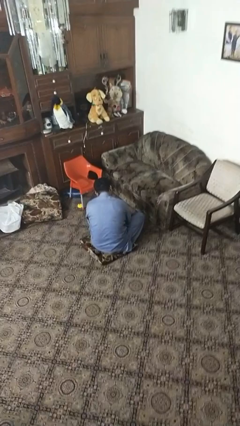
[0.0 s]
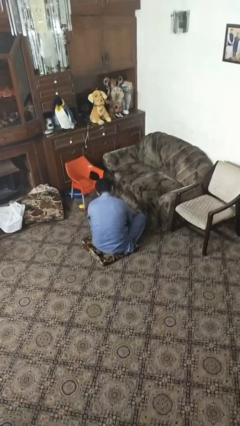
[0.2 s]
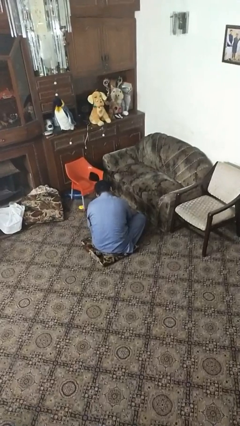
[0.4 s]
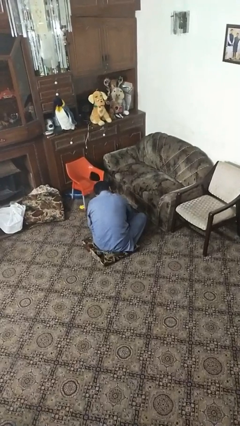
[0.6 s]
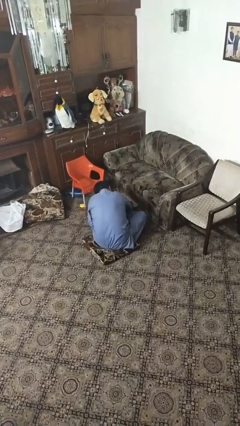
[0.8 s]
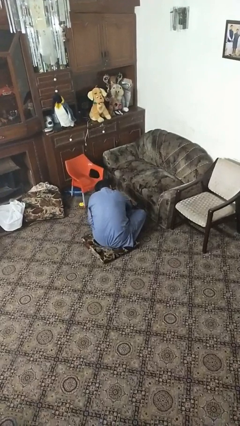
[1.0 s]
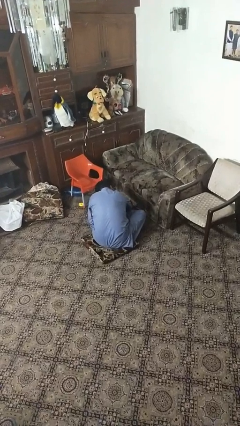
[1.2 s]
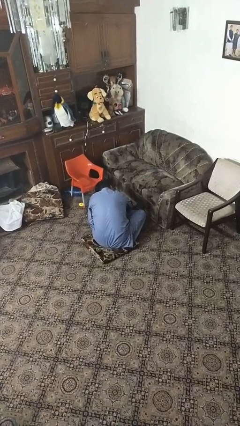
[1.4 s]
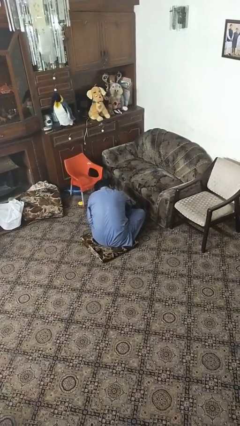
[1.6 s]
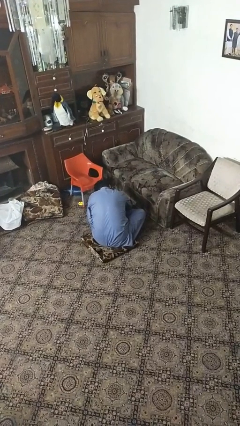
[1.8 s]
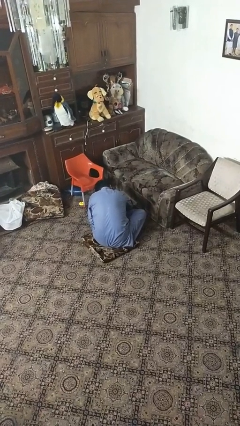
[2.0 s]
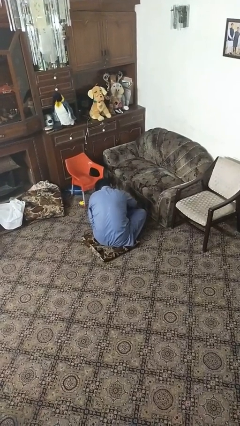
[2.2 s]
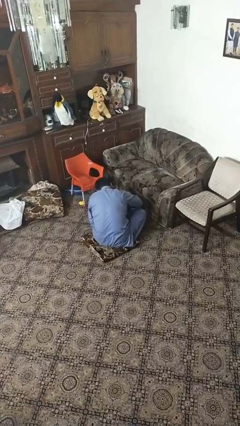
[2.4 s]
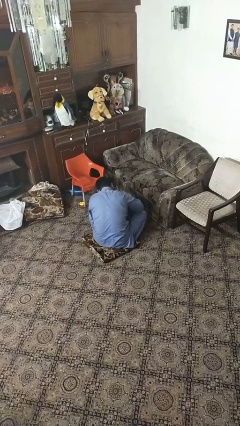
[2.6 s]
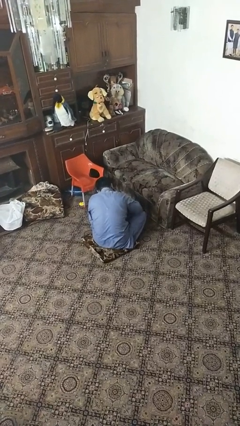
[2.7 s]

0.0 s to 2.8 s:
person searches under couch

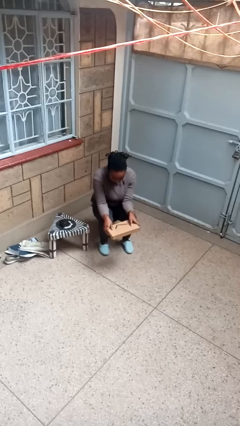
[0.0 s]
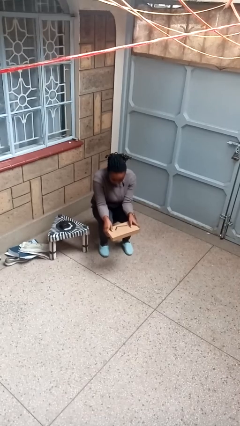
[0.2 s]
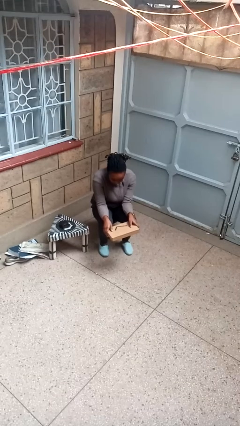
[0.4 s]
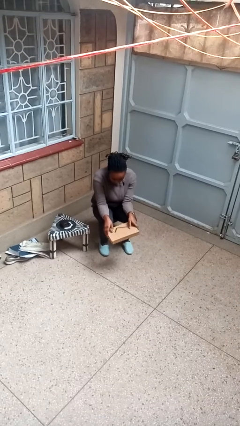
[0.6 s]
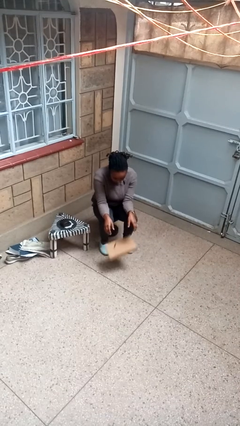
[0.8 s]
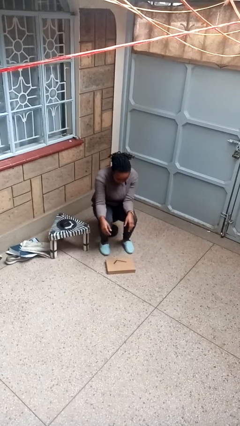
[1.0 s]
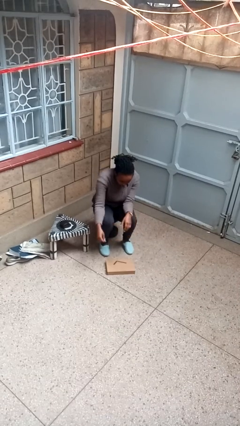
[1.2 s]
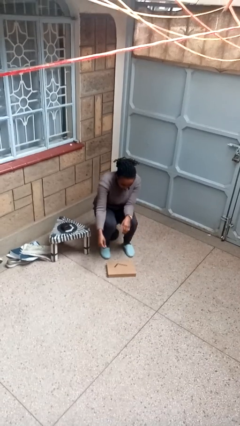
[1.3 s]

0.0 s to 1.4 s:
person drops object

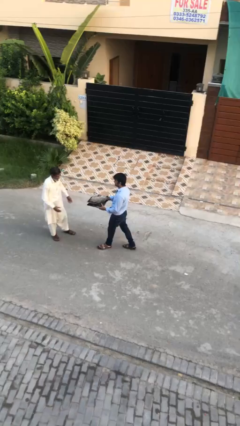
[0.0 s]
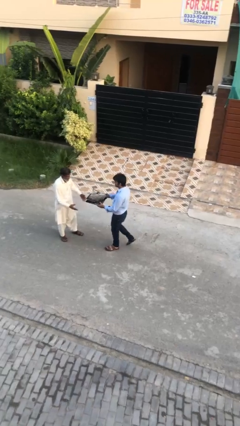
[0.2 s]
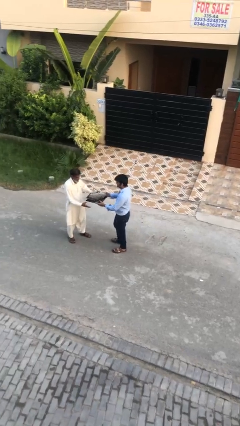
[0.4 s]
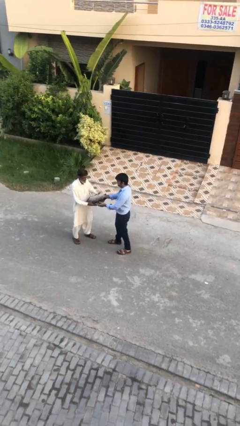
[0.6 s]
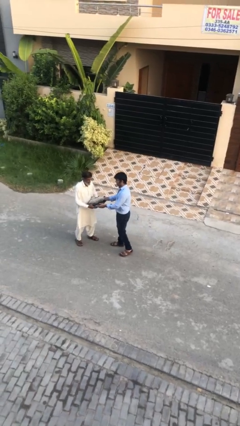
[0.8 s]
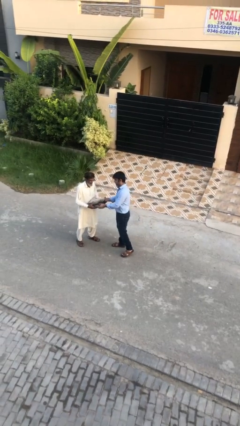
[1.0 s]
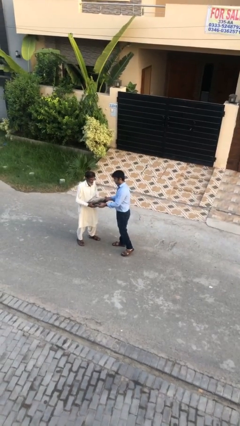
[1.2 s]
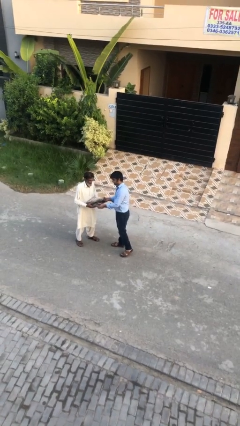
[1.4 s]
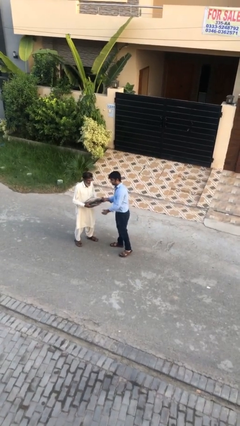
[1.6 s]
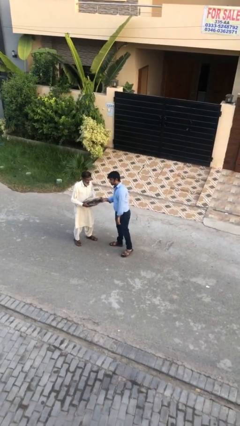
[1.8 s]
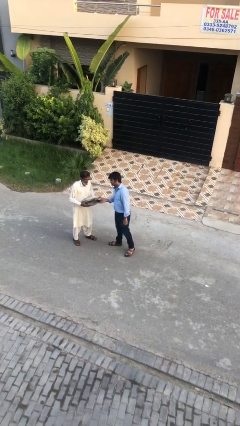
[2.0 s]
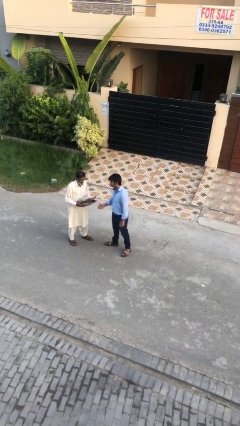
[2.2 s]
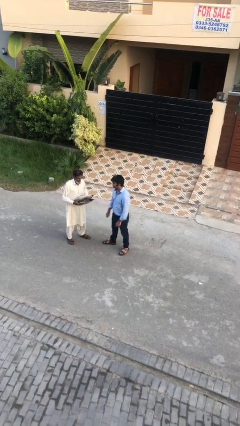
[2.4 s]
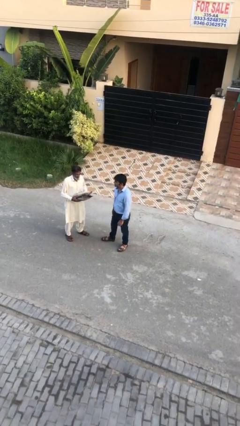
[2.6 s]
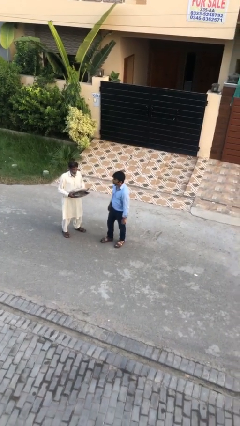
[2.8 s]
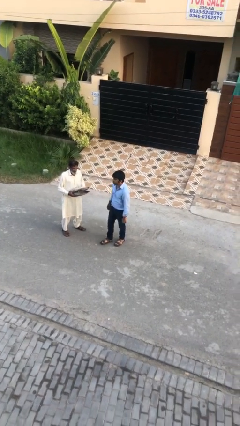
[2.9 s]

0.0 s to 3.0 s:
person transfers object to person

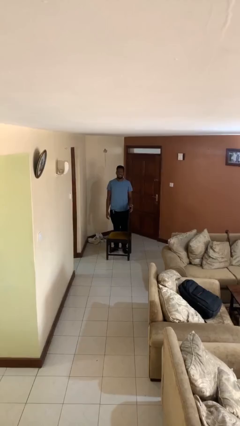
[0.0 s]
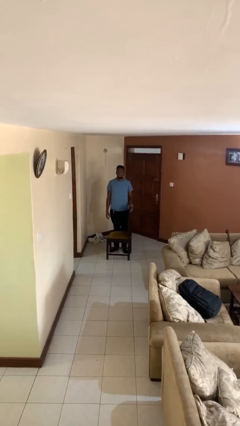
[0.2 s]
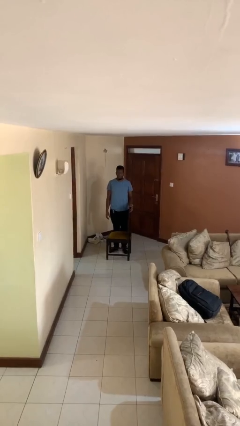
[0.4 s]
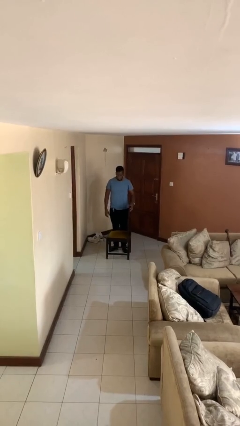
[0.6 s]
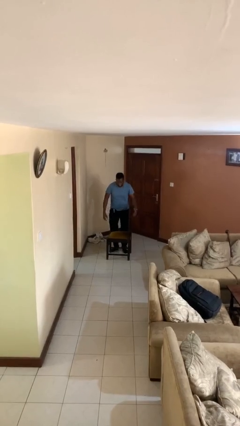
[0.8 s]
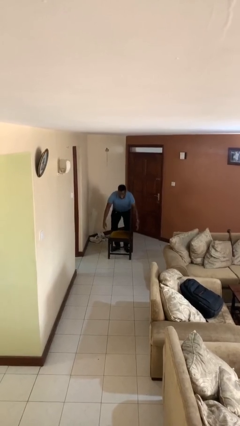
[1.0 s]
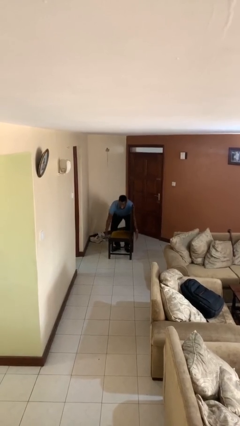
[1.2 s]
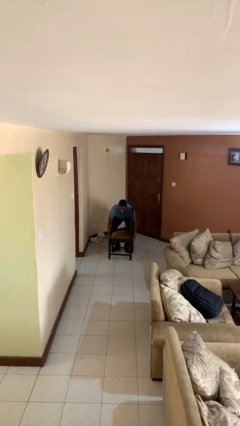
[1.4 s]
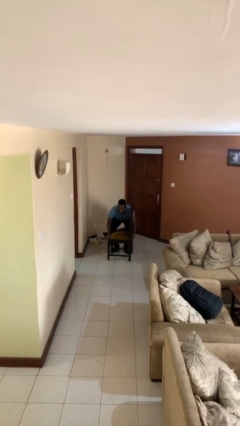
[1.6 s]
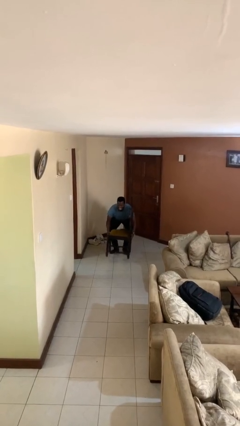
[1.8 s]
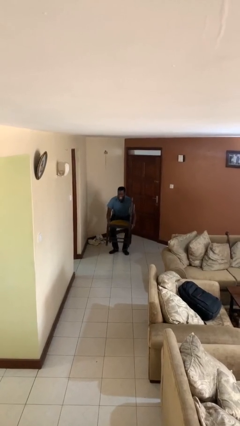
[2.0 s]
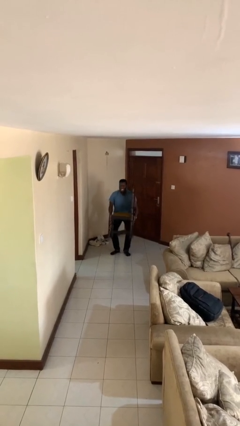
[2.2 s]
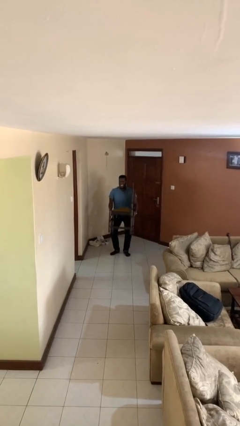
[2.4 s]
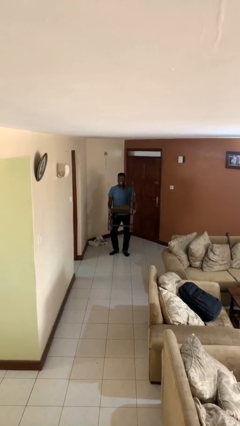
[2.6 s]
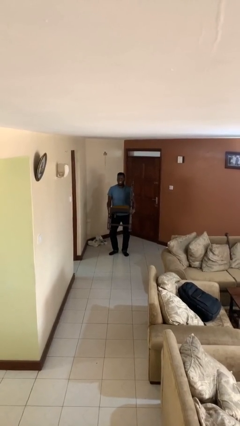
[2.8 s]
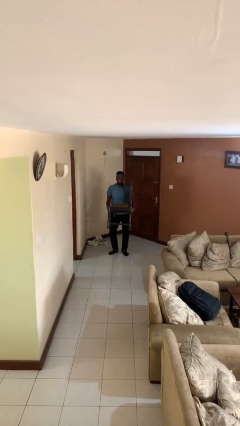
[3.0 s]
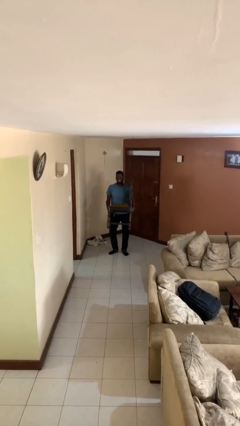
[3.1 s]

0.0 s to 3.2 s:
person picks up object from floor

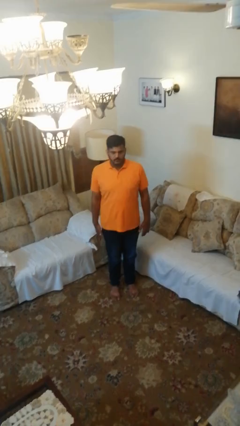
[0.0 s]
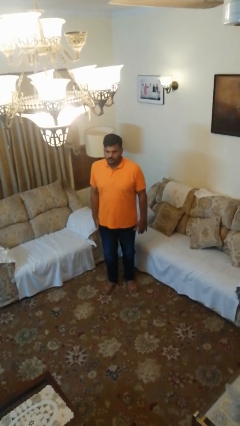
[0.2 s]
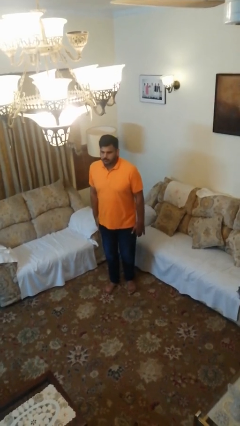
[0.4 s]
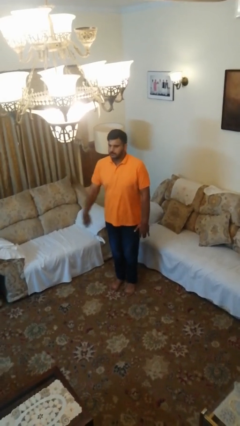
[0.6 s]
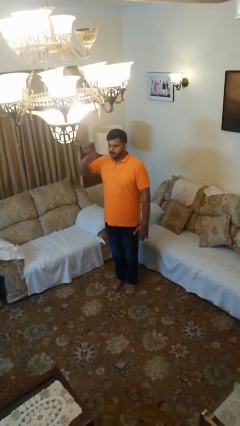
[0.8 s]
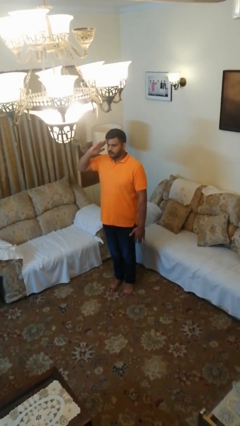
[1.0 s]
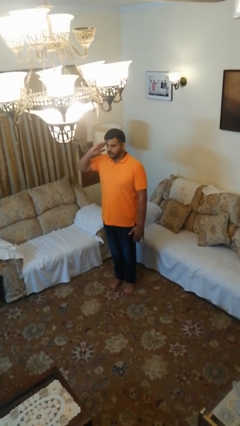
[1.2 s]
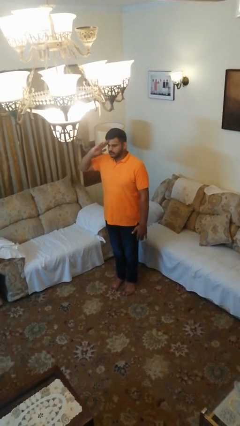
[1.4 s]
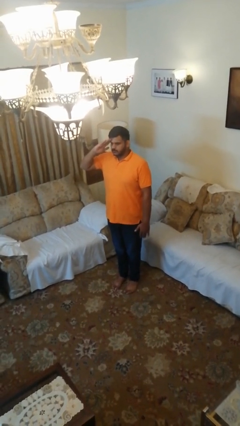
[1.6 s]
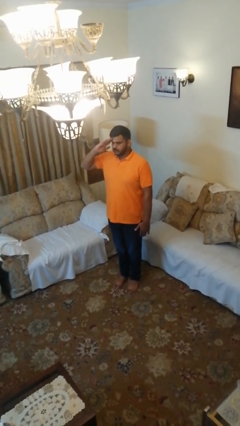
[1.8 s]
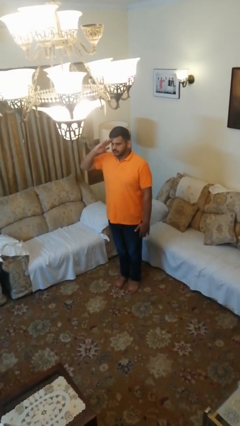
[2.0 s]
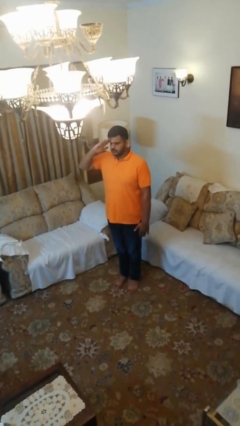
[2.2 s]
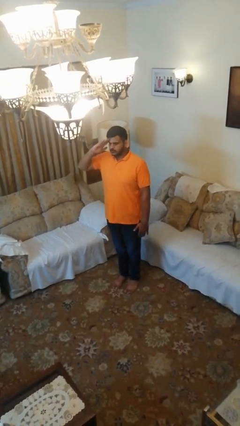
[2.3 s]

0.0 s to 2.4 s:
person salutes

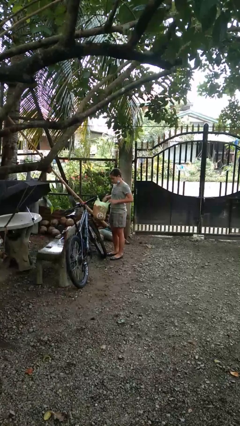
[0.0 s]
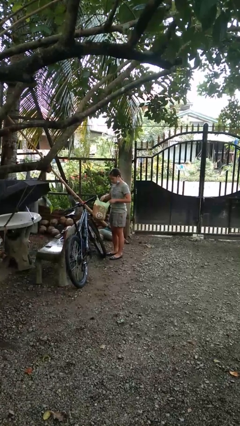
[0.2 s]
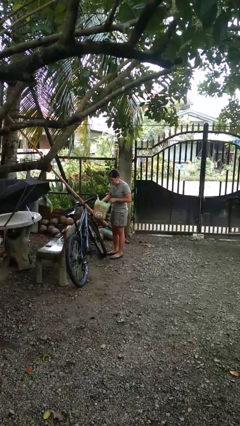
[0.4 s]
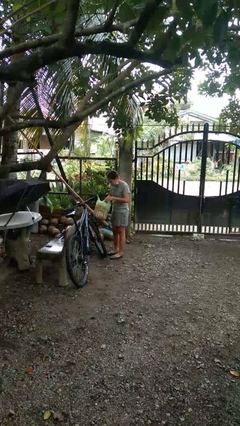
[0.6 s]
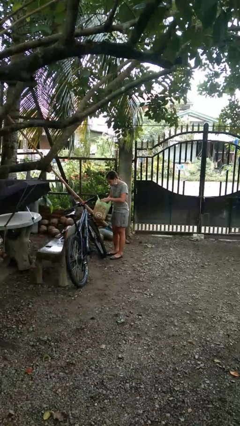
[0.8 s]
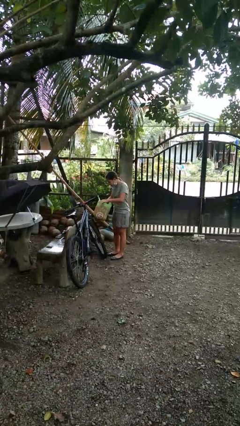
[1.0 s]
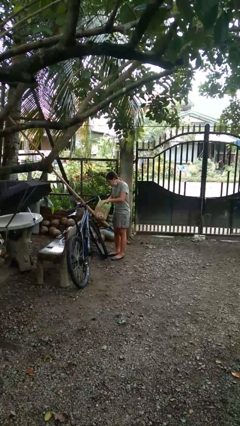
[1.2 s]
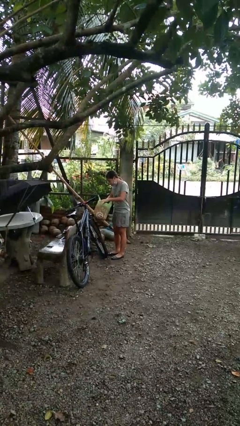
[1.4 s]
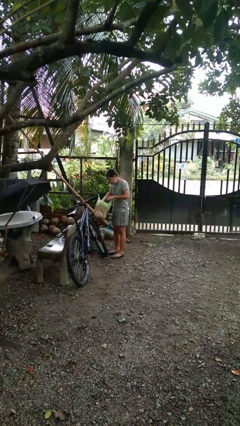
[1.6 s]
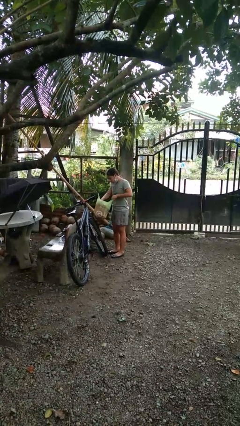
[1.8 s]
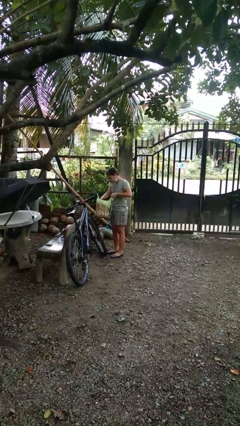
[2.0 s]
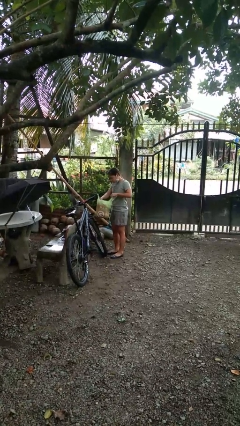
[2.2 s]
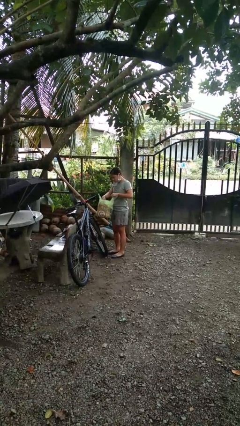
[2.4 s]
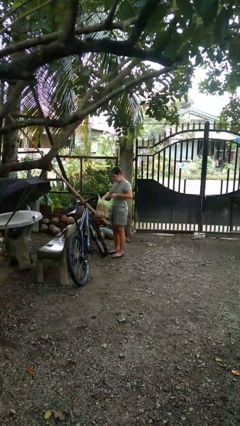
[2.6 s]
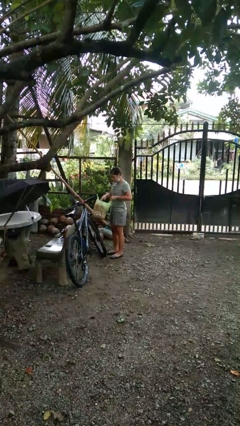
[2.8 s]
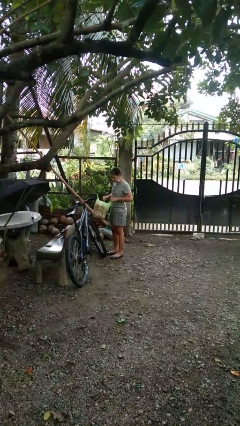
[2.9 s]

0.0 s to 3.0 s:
person searches in bag

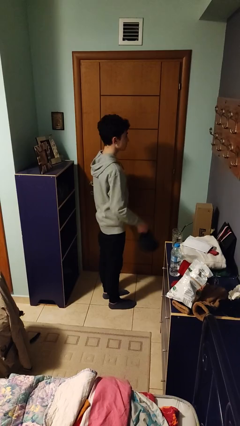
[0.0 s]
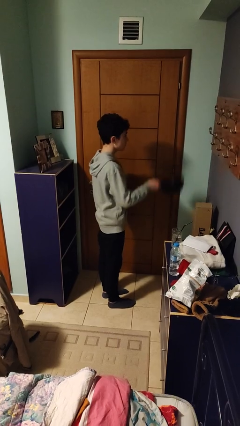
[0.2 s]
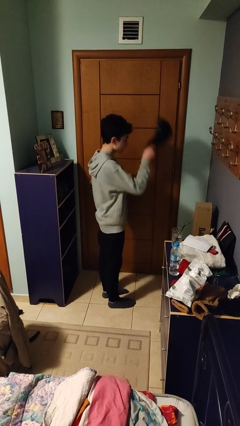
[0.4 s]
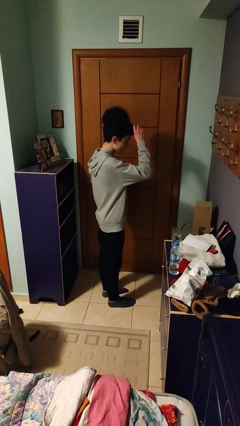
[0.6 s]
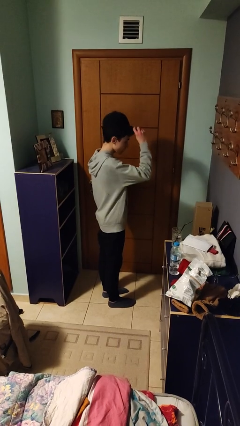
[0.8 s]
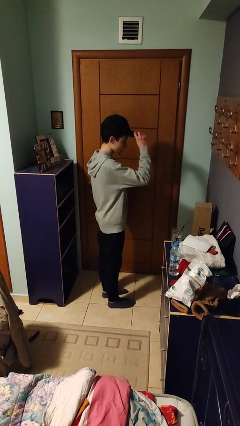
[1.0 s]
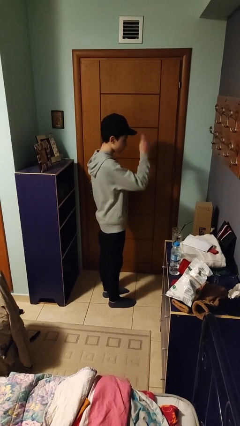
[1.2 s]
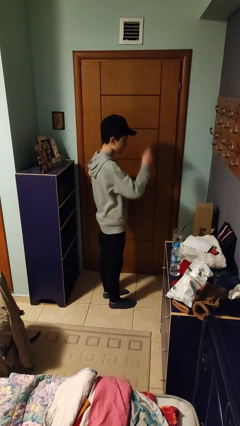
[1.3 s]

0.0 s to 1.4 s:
person puts on hat
